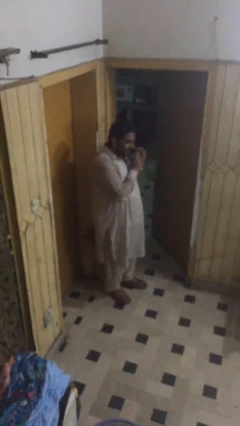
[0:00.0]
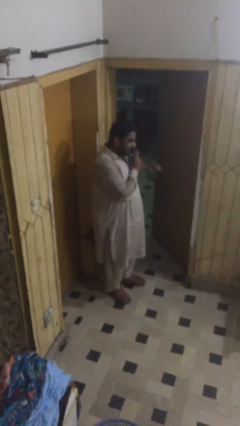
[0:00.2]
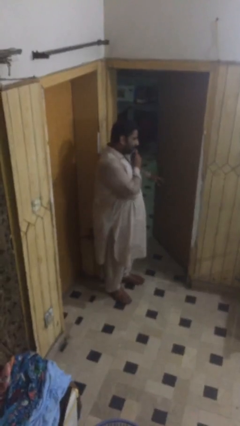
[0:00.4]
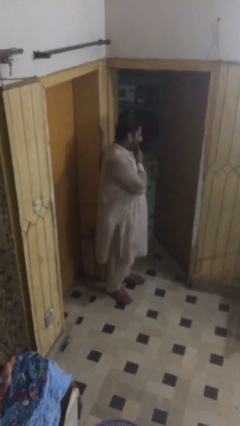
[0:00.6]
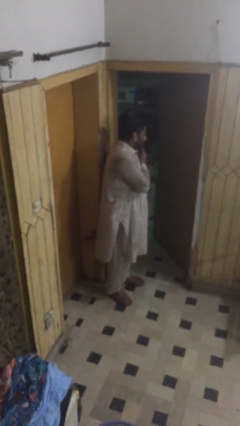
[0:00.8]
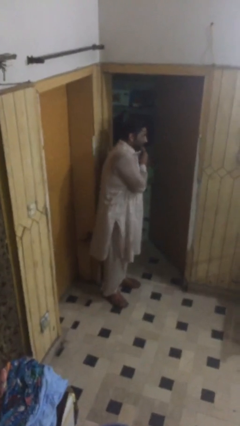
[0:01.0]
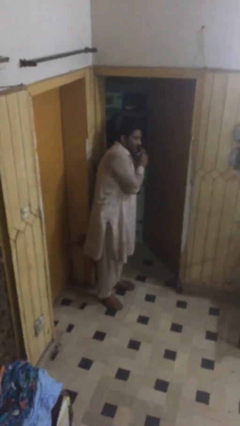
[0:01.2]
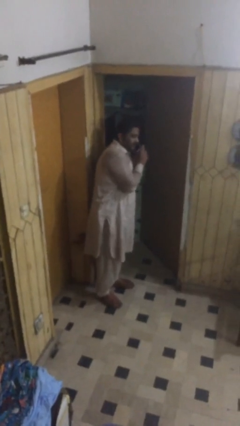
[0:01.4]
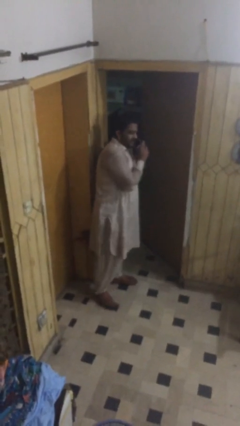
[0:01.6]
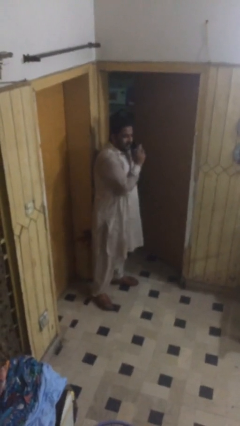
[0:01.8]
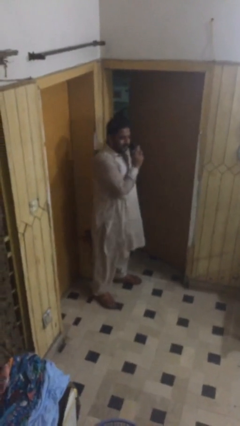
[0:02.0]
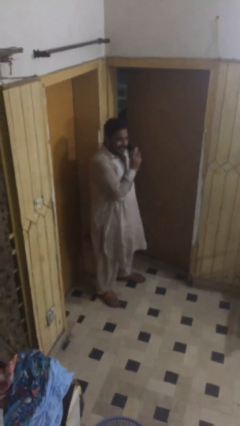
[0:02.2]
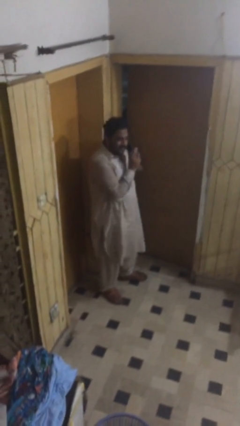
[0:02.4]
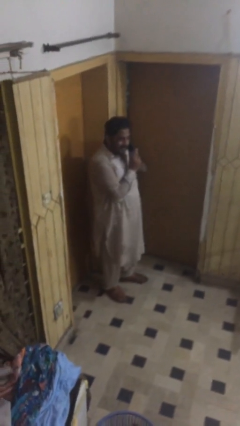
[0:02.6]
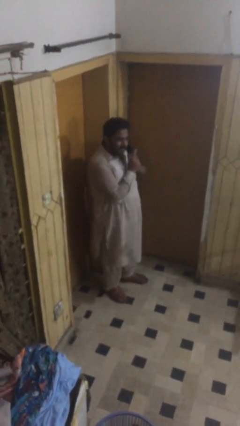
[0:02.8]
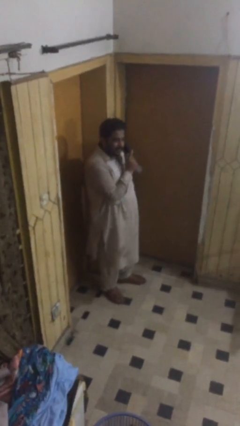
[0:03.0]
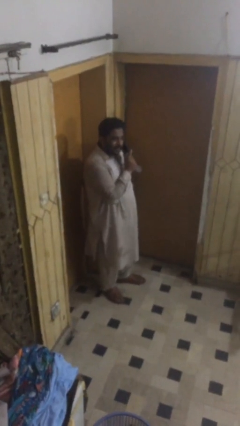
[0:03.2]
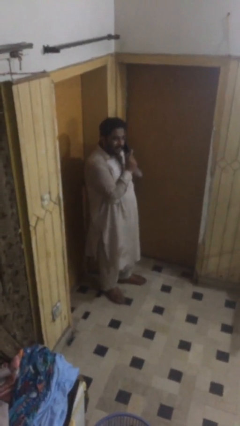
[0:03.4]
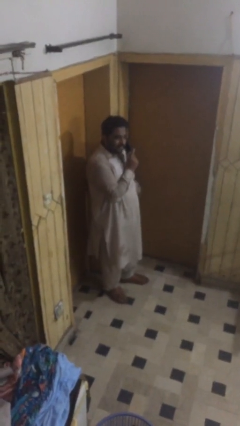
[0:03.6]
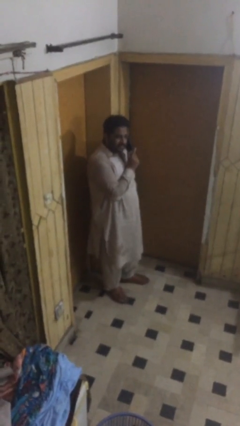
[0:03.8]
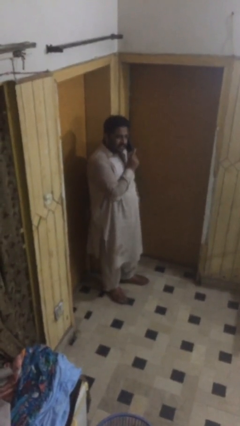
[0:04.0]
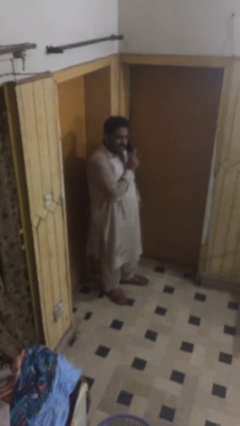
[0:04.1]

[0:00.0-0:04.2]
person closes facility door

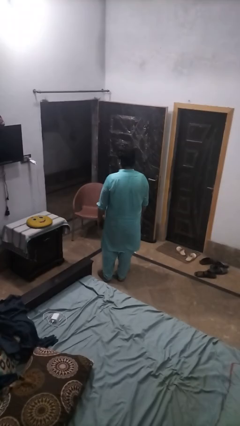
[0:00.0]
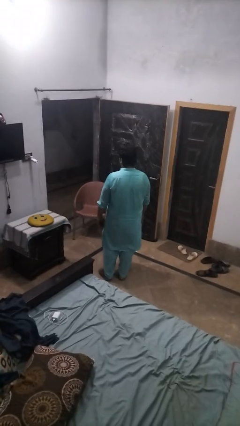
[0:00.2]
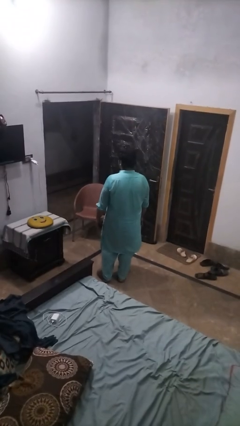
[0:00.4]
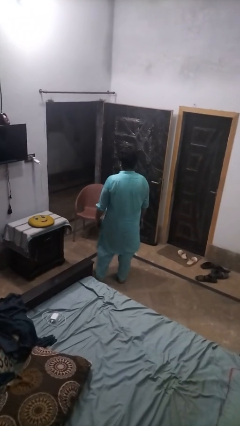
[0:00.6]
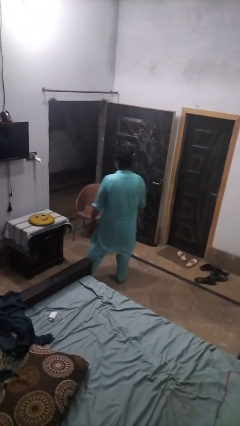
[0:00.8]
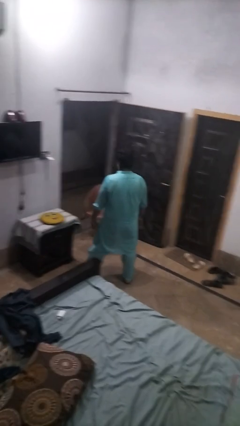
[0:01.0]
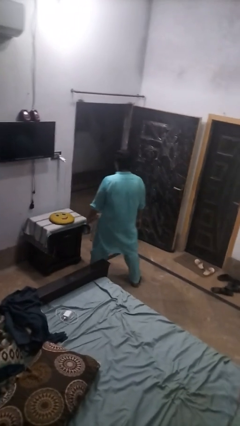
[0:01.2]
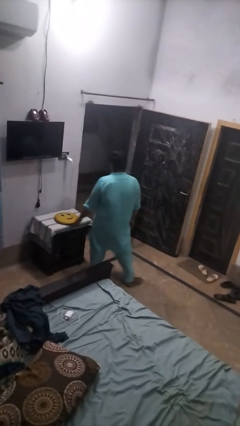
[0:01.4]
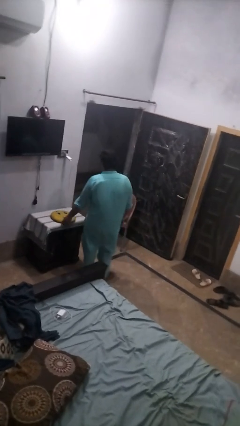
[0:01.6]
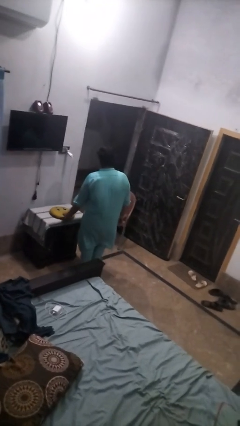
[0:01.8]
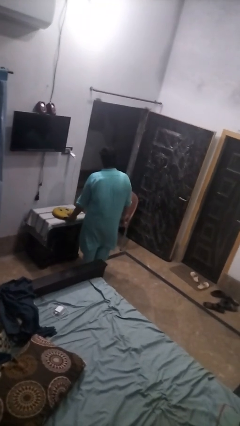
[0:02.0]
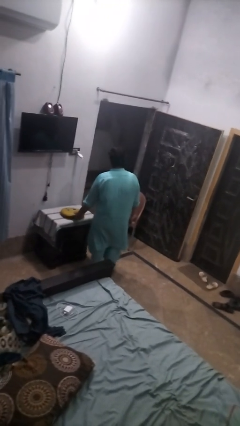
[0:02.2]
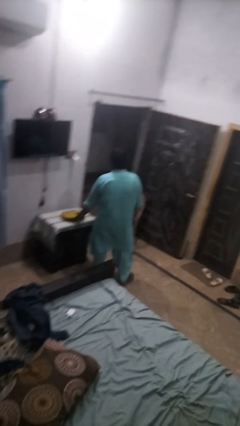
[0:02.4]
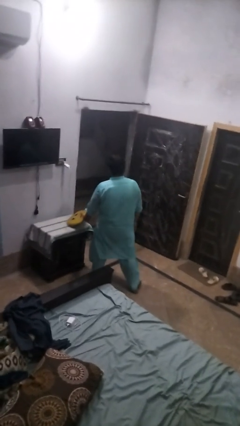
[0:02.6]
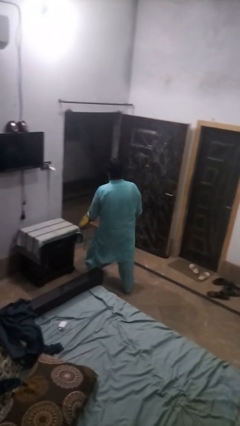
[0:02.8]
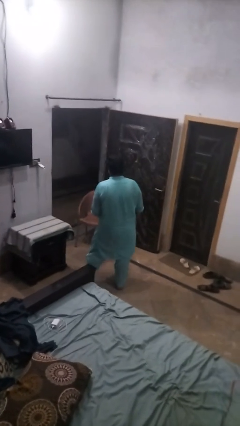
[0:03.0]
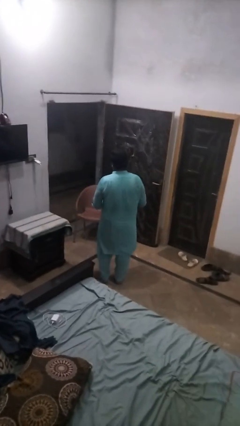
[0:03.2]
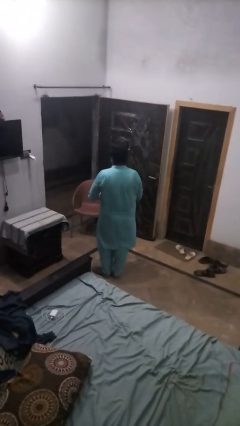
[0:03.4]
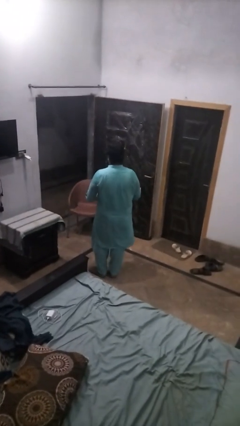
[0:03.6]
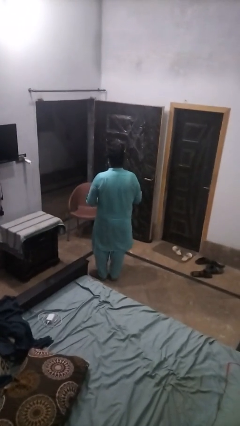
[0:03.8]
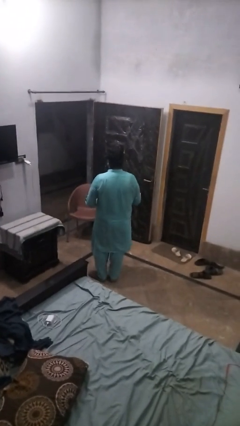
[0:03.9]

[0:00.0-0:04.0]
person picks up object from table

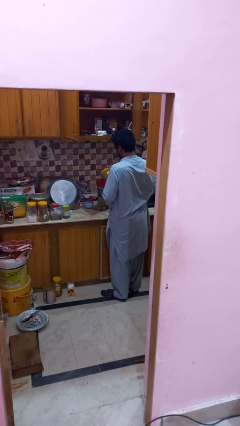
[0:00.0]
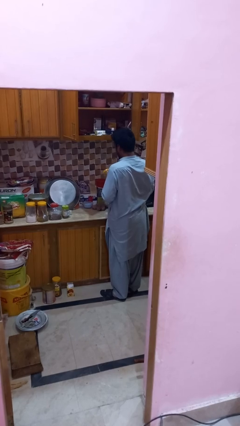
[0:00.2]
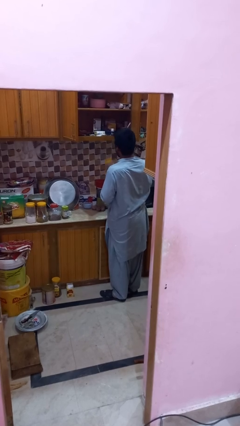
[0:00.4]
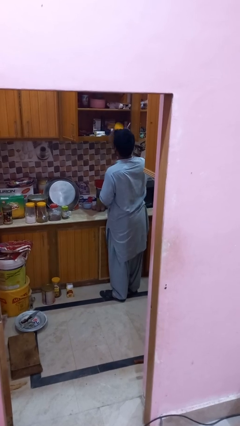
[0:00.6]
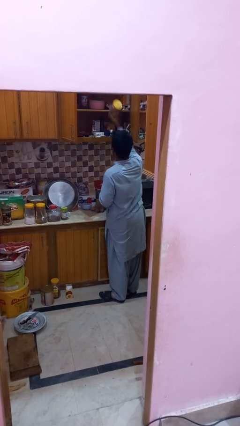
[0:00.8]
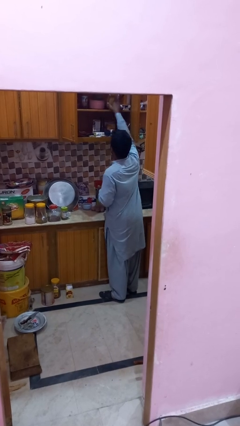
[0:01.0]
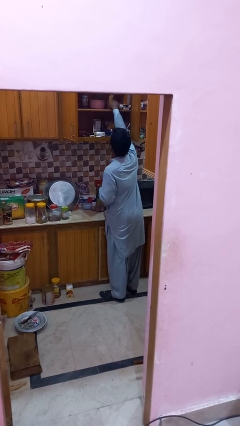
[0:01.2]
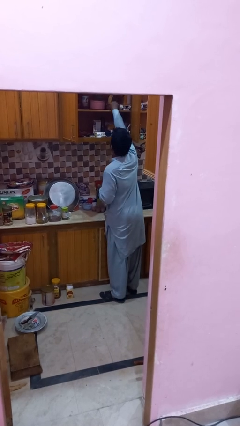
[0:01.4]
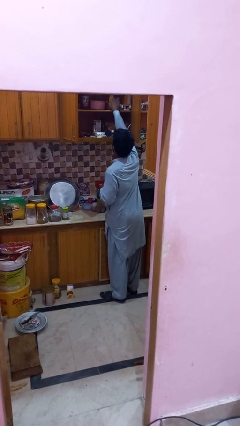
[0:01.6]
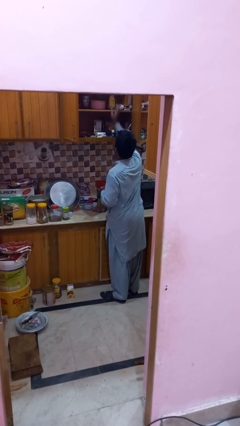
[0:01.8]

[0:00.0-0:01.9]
person puts object in cabinet

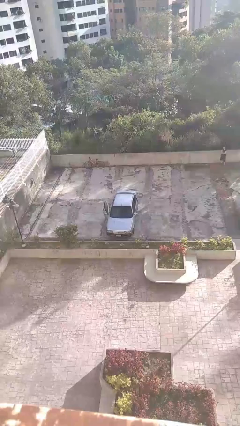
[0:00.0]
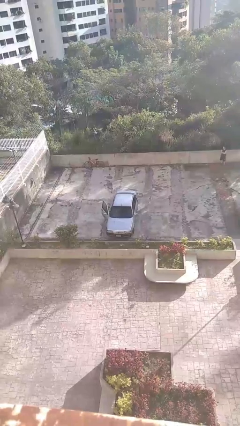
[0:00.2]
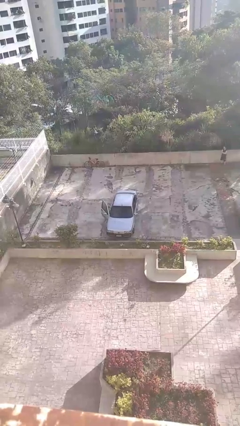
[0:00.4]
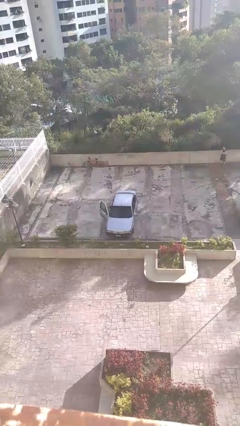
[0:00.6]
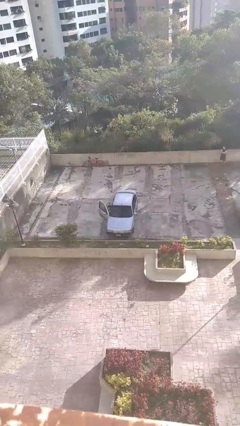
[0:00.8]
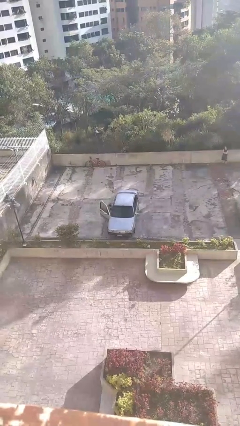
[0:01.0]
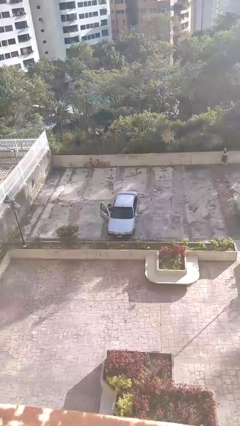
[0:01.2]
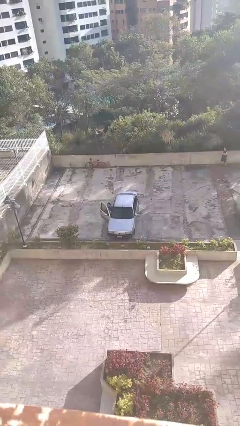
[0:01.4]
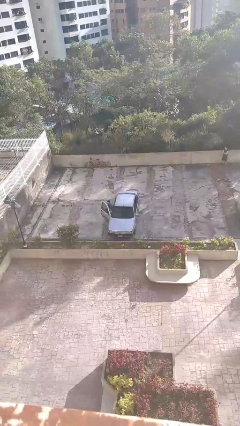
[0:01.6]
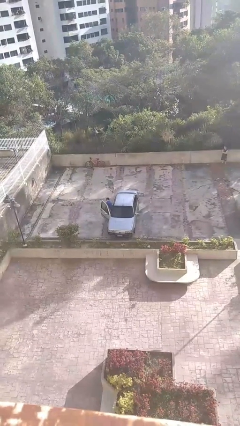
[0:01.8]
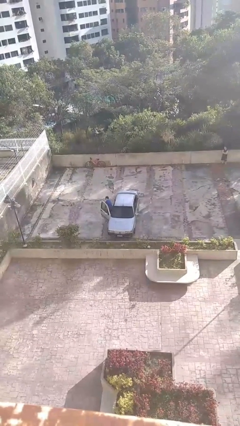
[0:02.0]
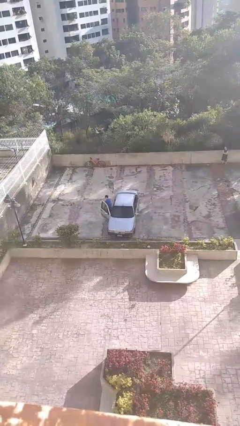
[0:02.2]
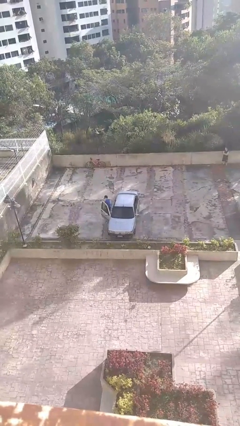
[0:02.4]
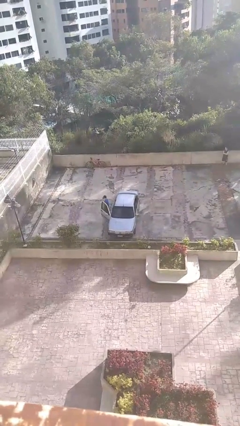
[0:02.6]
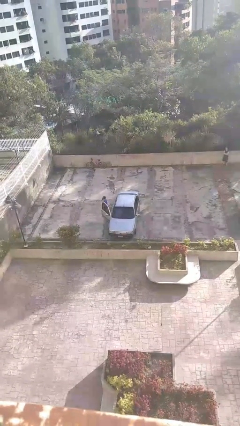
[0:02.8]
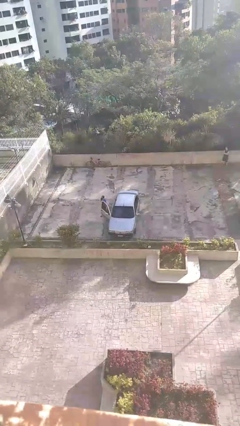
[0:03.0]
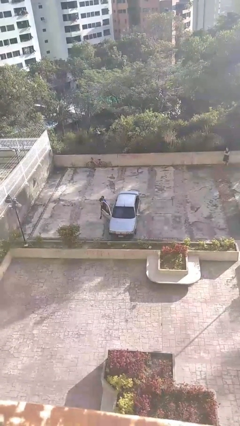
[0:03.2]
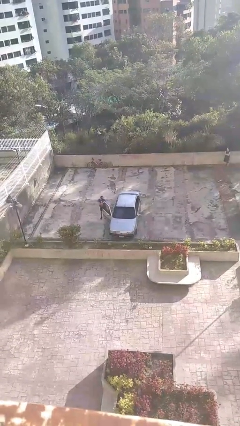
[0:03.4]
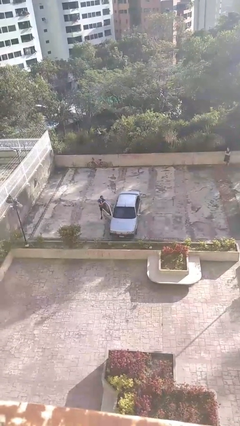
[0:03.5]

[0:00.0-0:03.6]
car drops off person

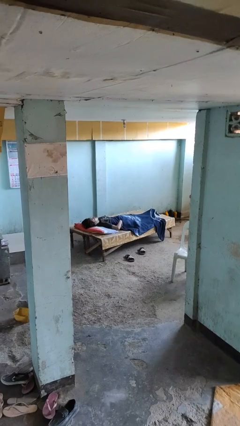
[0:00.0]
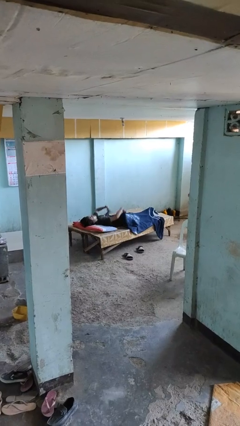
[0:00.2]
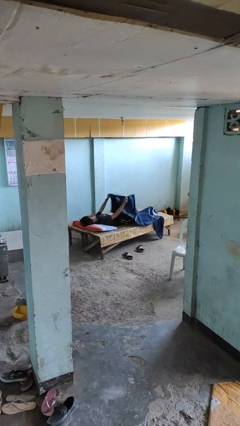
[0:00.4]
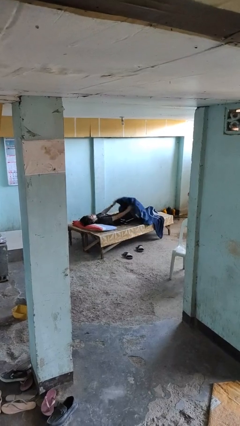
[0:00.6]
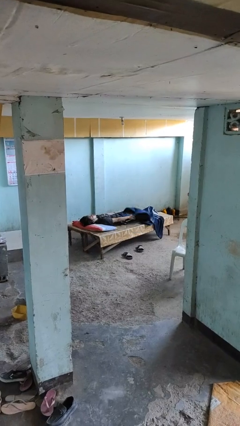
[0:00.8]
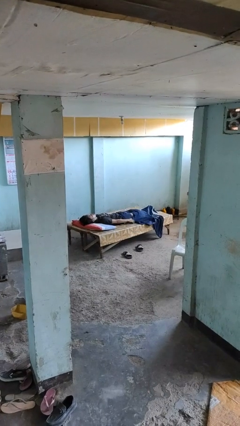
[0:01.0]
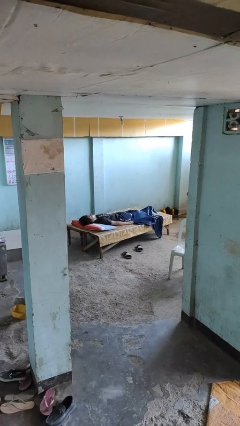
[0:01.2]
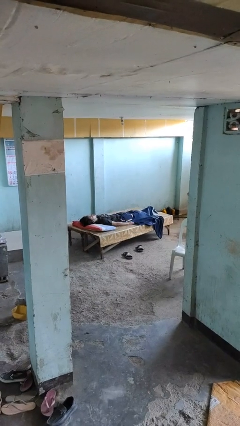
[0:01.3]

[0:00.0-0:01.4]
person uncovers with blanket

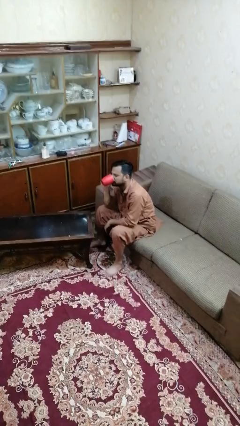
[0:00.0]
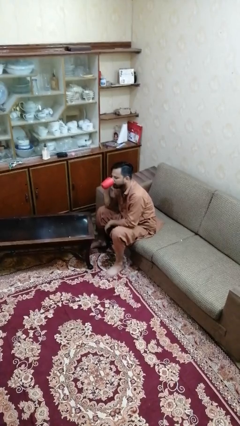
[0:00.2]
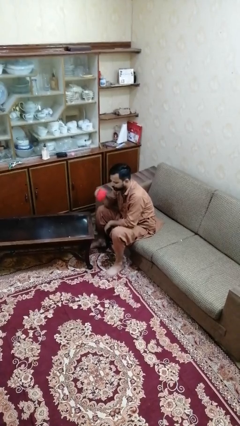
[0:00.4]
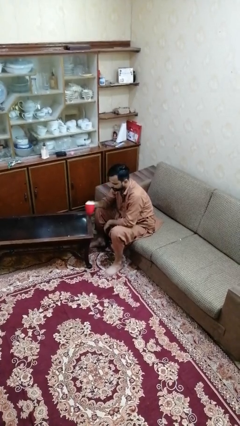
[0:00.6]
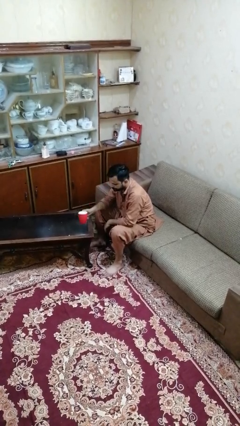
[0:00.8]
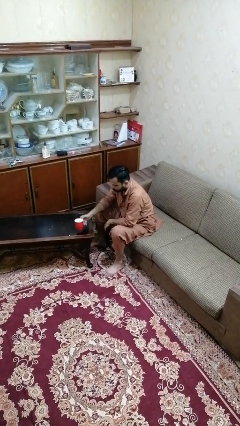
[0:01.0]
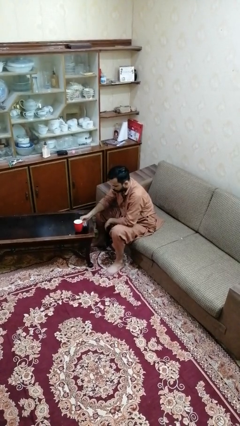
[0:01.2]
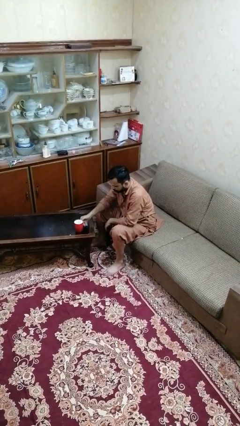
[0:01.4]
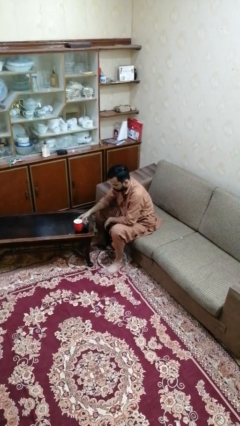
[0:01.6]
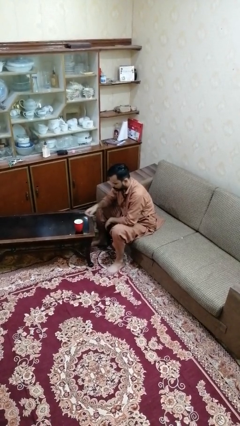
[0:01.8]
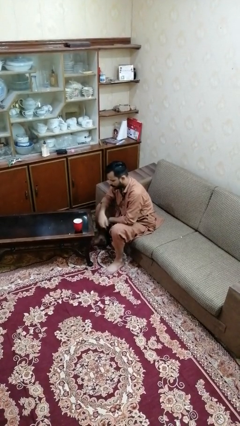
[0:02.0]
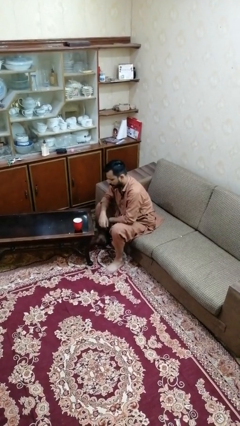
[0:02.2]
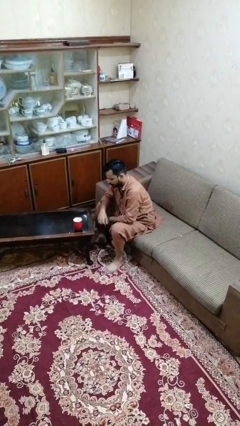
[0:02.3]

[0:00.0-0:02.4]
person puts down object on table
